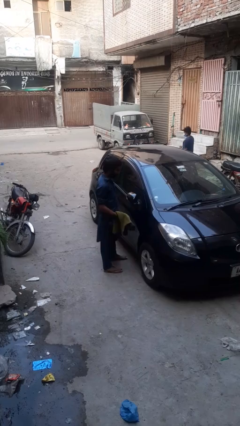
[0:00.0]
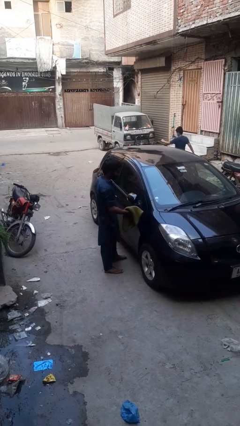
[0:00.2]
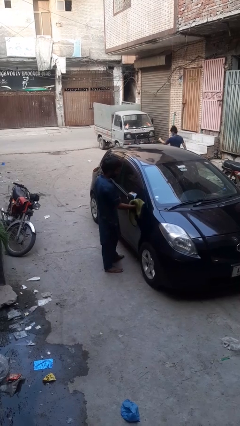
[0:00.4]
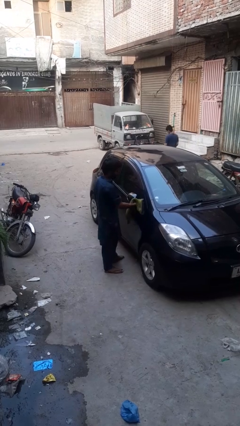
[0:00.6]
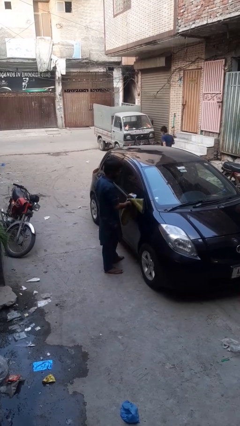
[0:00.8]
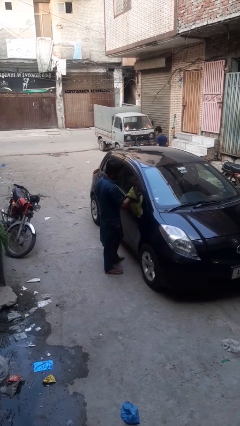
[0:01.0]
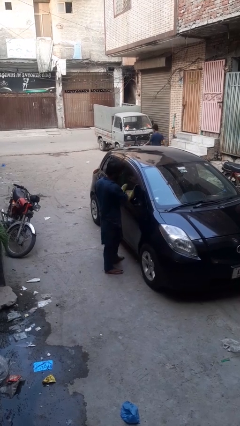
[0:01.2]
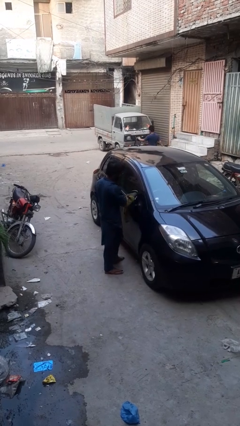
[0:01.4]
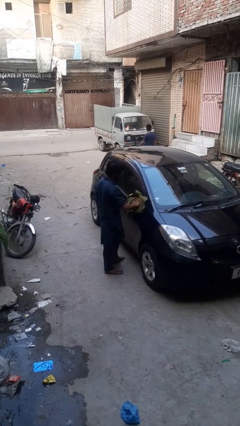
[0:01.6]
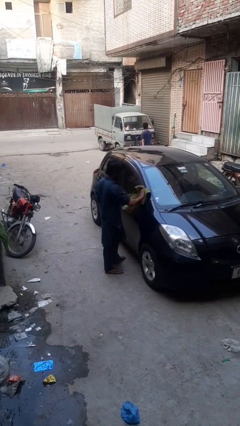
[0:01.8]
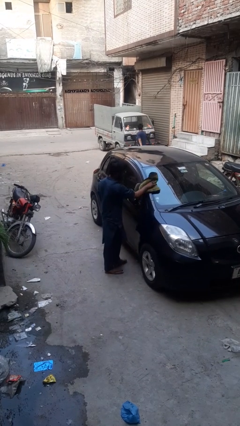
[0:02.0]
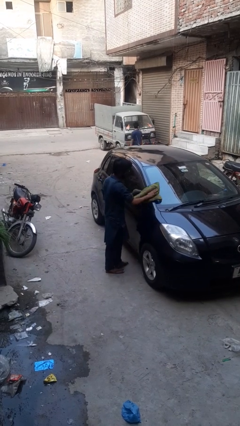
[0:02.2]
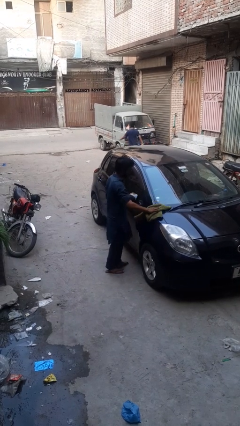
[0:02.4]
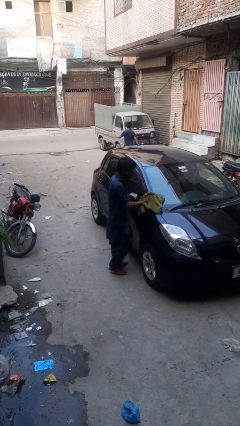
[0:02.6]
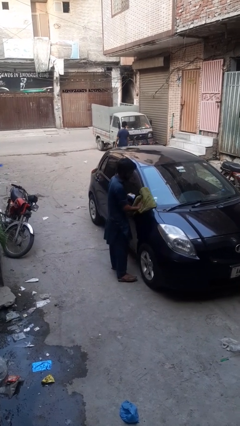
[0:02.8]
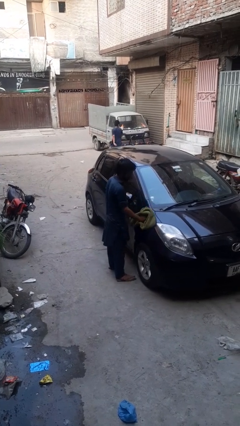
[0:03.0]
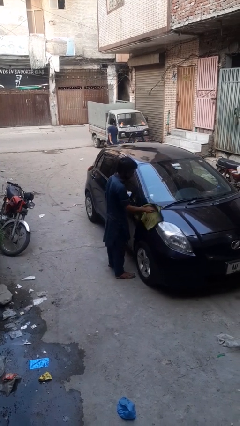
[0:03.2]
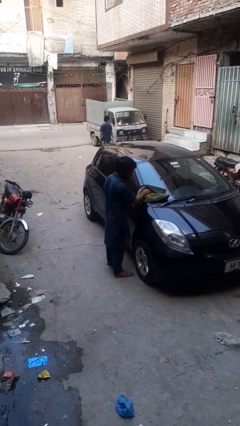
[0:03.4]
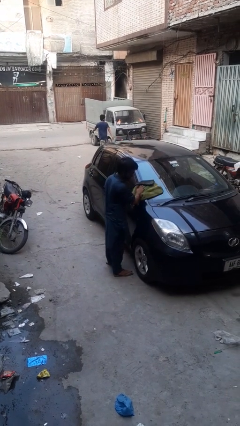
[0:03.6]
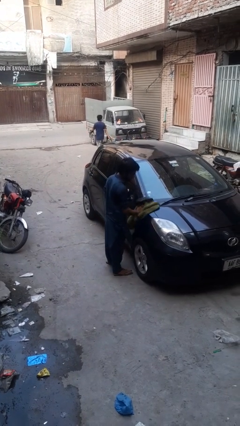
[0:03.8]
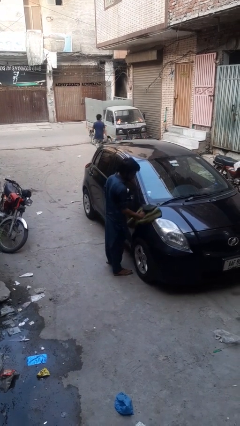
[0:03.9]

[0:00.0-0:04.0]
person polishes car with rag

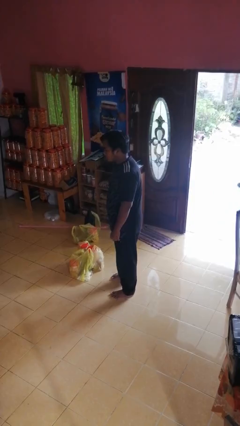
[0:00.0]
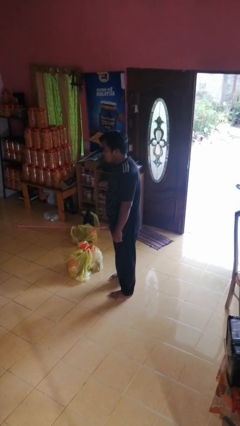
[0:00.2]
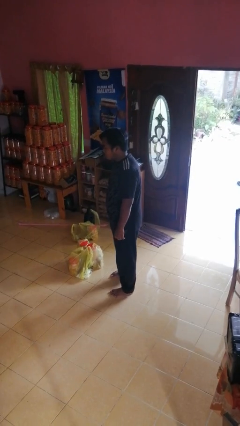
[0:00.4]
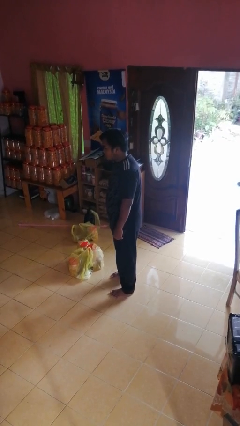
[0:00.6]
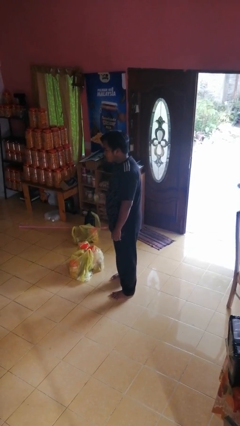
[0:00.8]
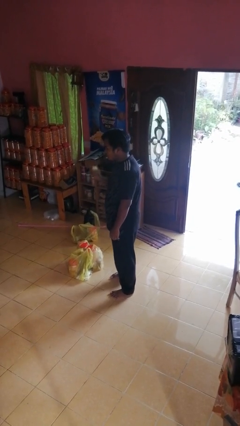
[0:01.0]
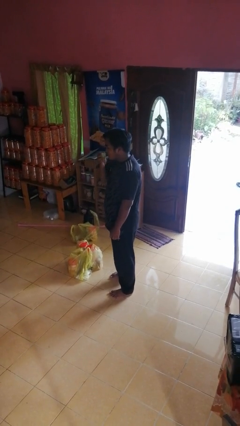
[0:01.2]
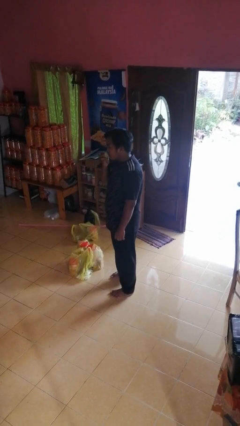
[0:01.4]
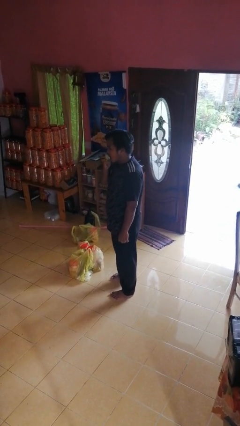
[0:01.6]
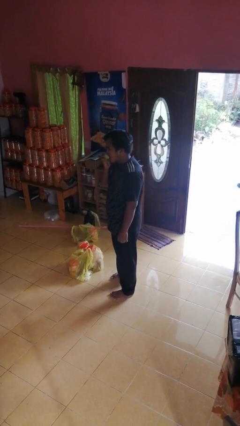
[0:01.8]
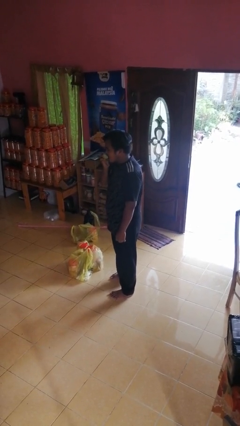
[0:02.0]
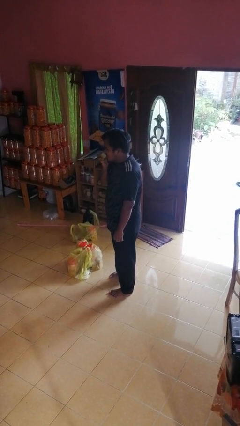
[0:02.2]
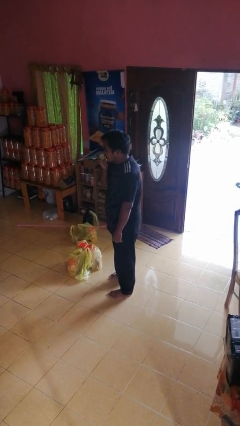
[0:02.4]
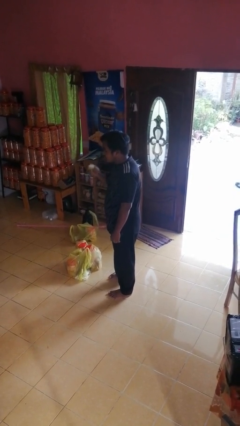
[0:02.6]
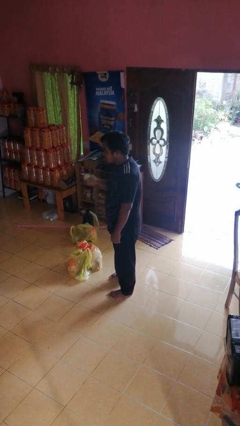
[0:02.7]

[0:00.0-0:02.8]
person eats apple

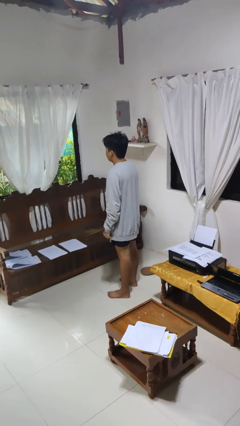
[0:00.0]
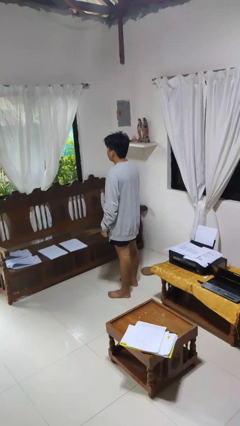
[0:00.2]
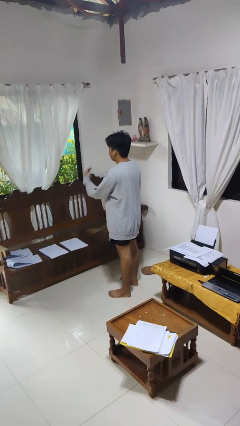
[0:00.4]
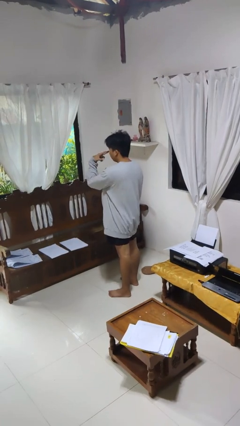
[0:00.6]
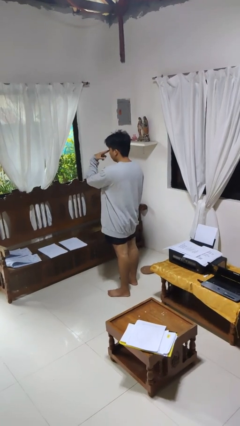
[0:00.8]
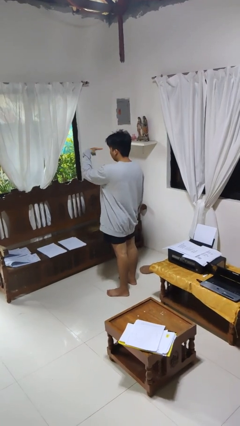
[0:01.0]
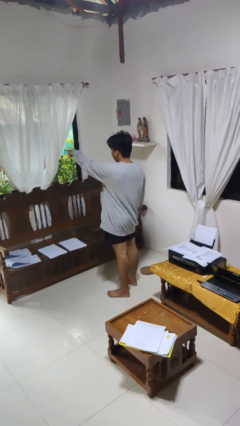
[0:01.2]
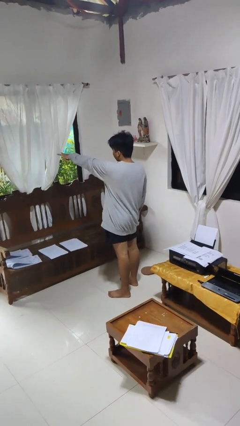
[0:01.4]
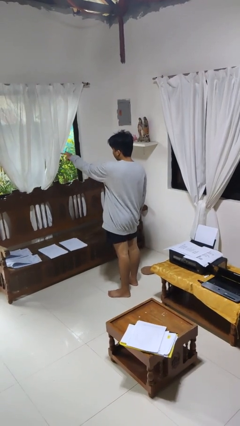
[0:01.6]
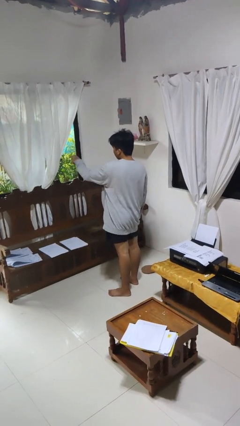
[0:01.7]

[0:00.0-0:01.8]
person gestures watch closely

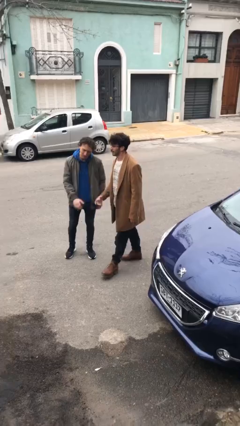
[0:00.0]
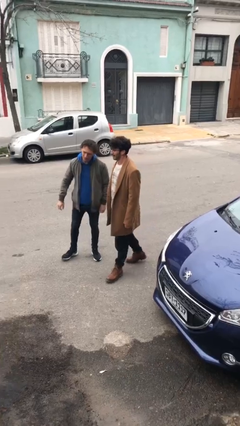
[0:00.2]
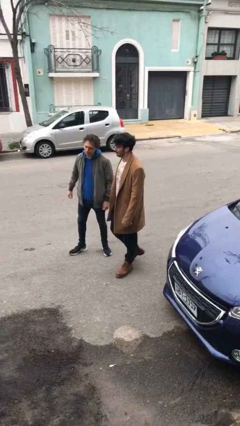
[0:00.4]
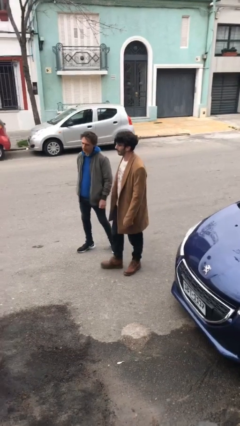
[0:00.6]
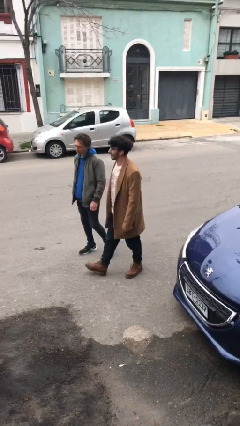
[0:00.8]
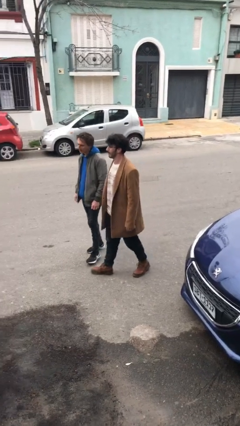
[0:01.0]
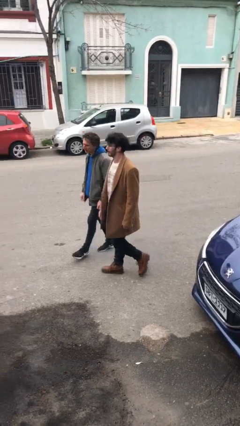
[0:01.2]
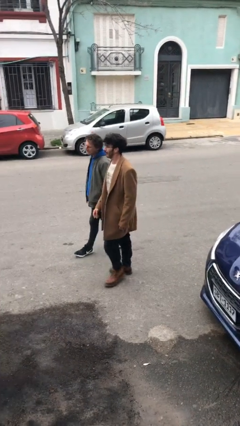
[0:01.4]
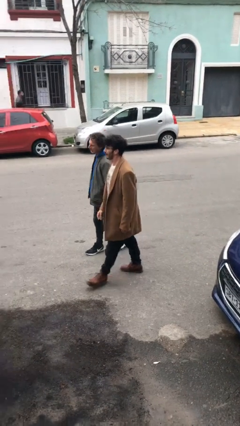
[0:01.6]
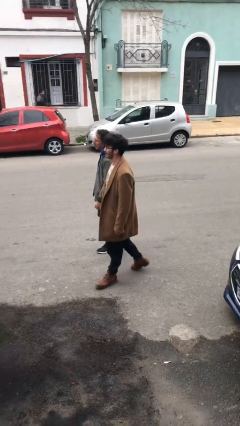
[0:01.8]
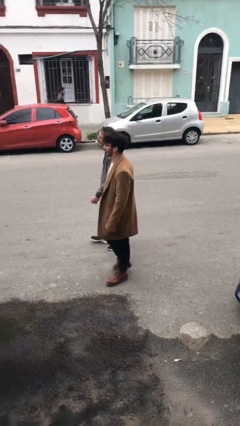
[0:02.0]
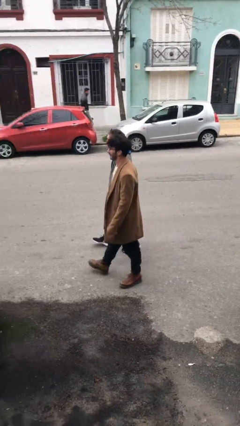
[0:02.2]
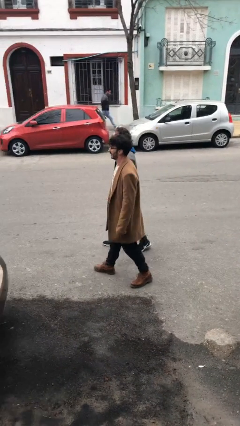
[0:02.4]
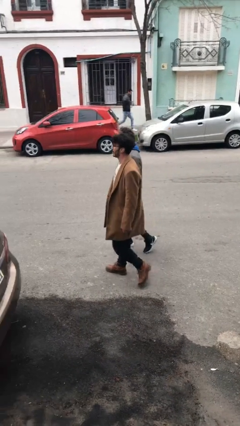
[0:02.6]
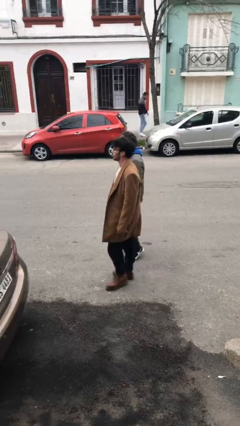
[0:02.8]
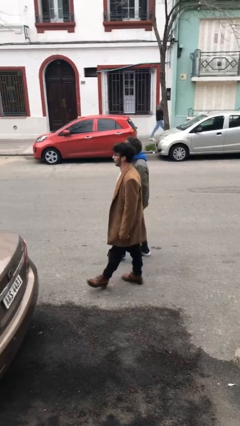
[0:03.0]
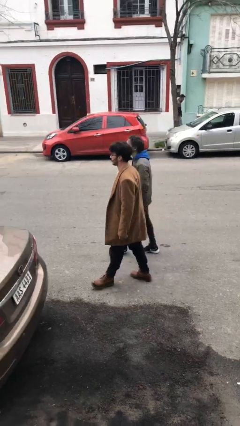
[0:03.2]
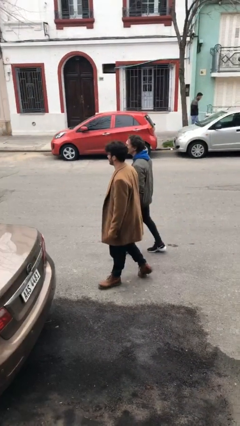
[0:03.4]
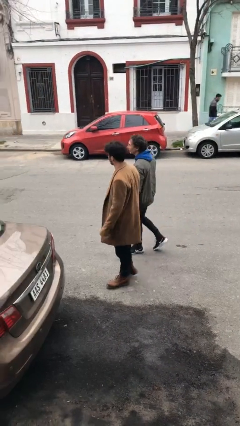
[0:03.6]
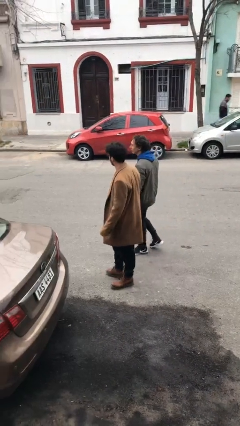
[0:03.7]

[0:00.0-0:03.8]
person talks to person

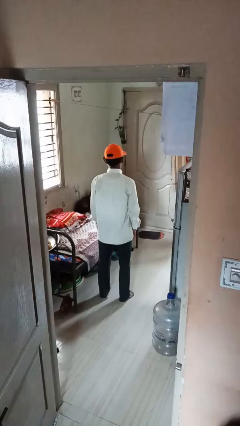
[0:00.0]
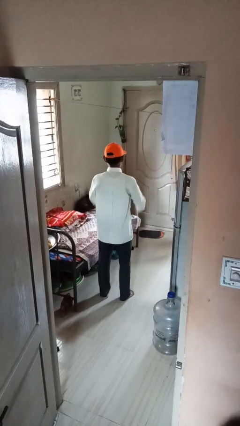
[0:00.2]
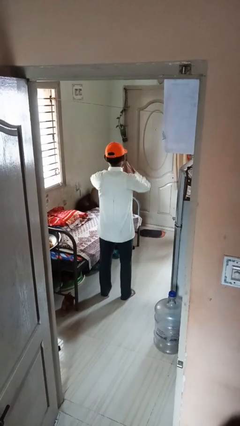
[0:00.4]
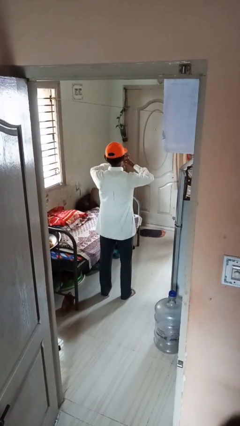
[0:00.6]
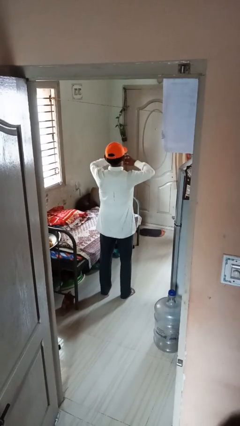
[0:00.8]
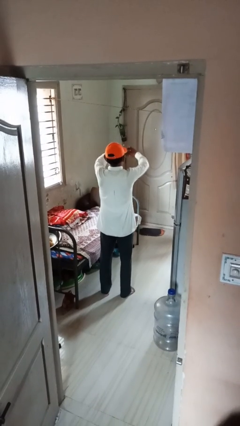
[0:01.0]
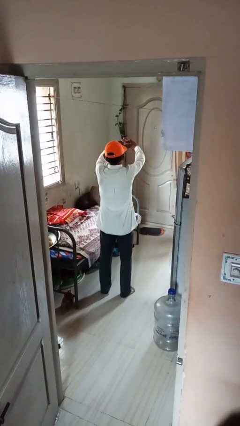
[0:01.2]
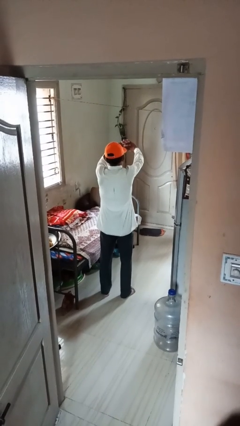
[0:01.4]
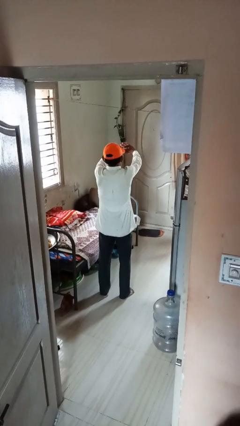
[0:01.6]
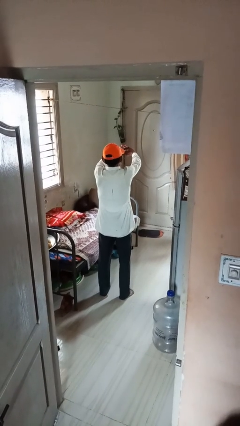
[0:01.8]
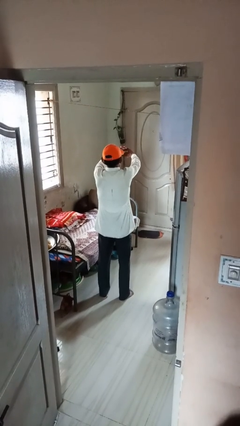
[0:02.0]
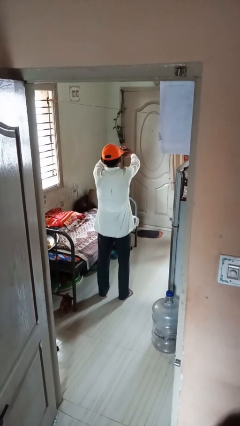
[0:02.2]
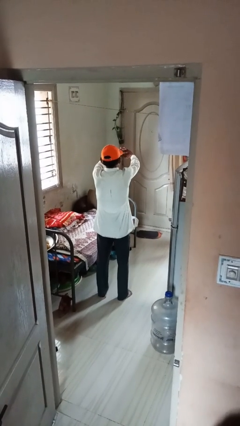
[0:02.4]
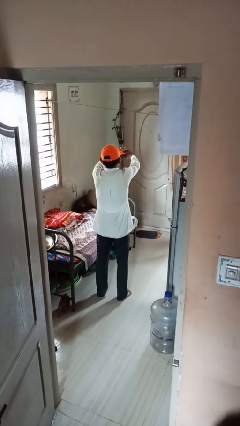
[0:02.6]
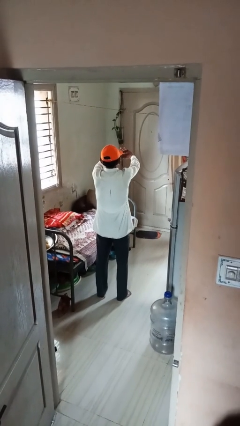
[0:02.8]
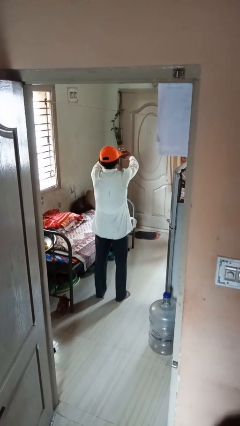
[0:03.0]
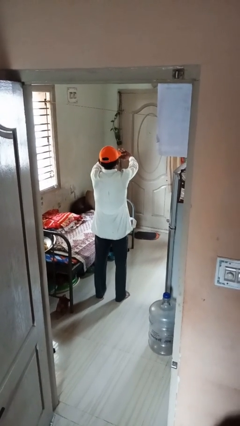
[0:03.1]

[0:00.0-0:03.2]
person cracks knuckles

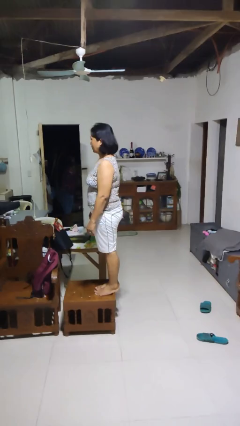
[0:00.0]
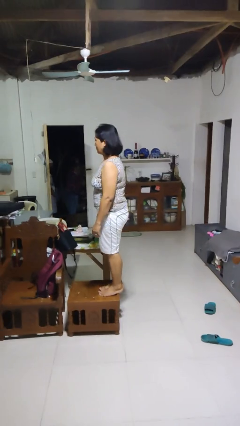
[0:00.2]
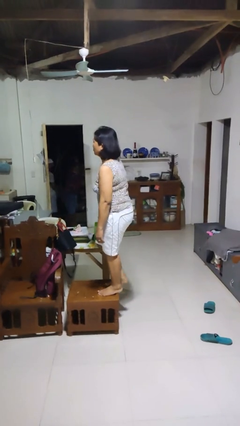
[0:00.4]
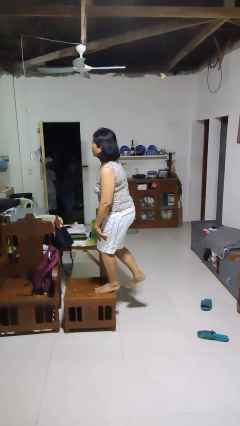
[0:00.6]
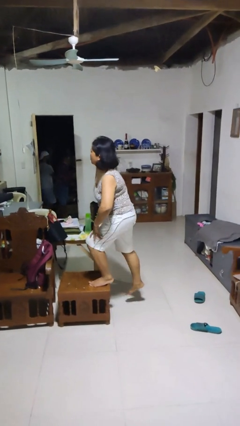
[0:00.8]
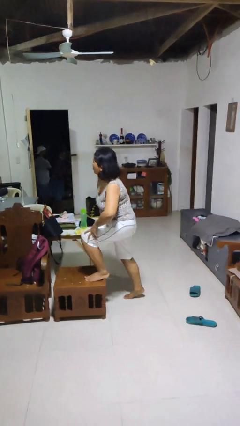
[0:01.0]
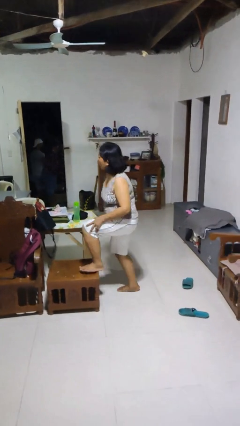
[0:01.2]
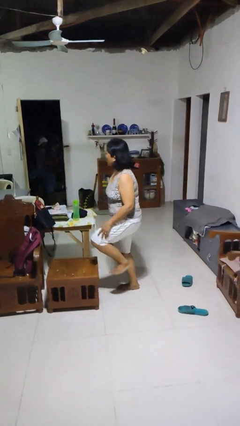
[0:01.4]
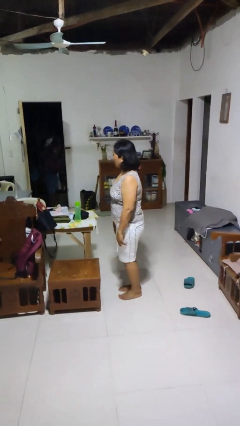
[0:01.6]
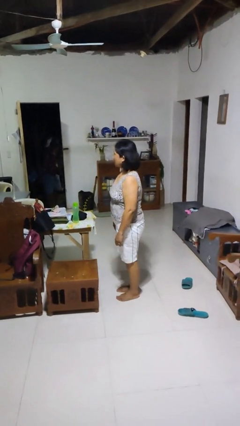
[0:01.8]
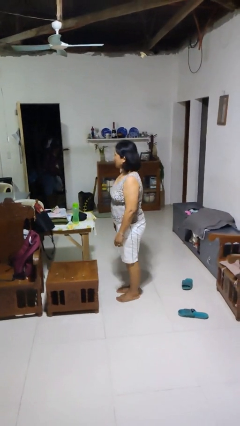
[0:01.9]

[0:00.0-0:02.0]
person climbs off chair
